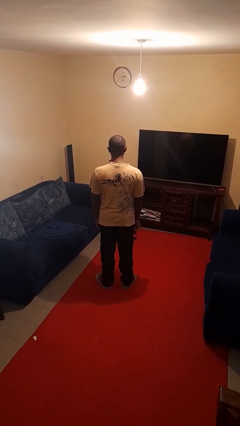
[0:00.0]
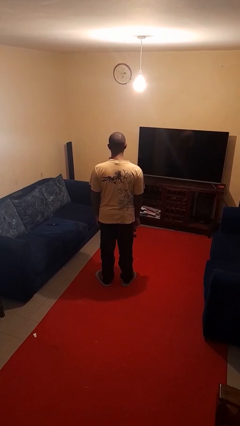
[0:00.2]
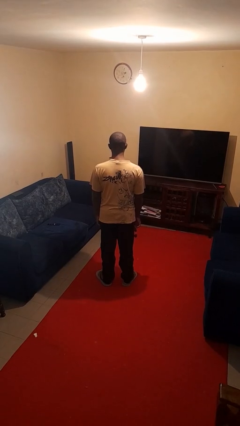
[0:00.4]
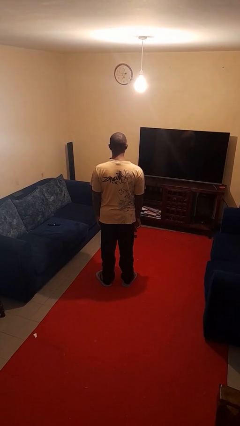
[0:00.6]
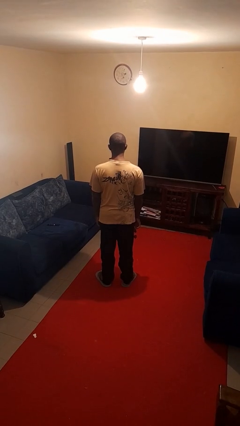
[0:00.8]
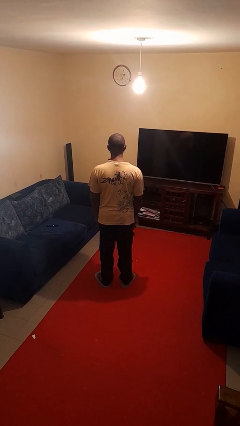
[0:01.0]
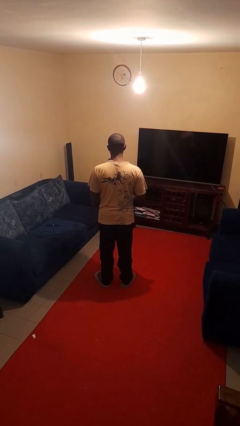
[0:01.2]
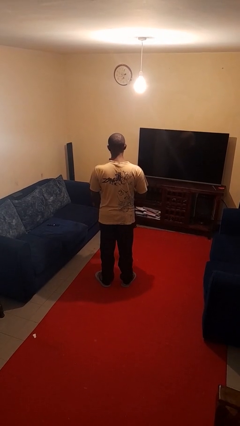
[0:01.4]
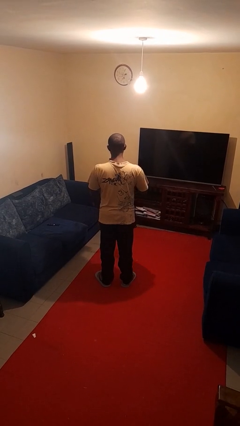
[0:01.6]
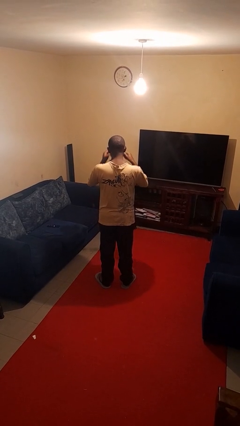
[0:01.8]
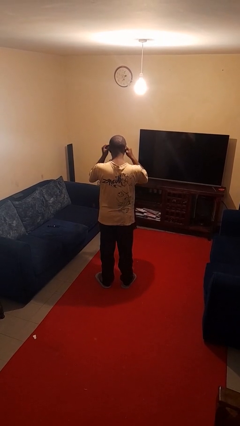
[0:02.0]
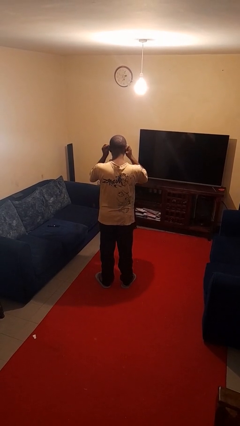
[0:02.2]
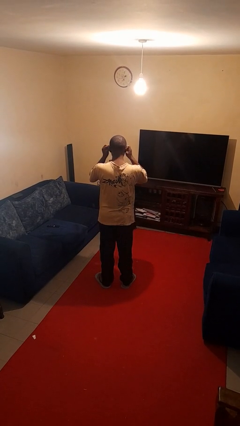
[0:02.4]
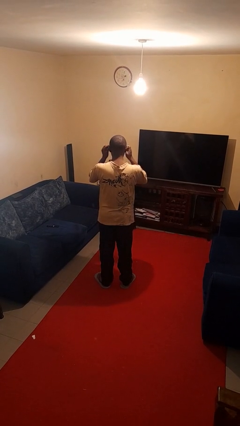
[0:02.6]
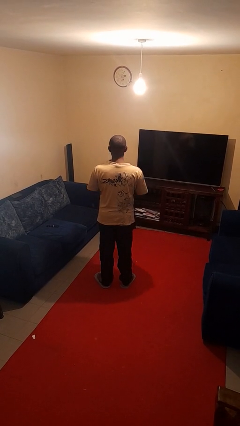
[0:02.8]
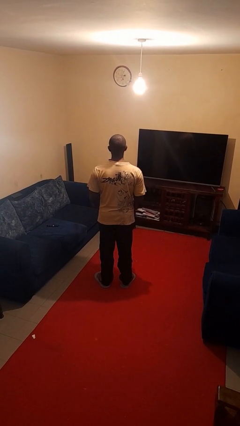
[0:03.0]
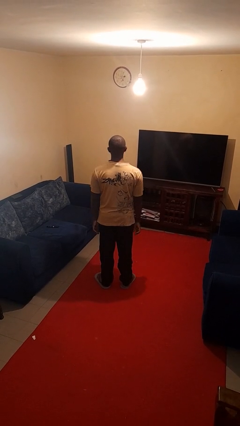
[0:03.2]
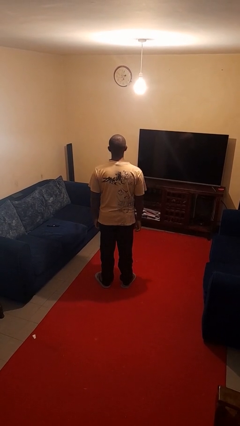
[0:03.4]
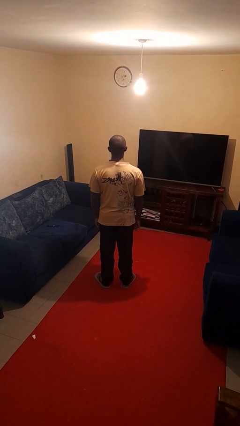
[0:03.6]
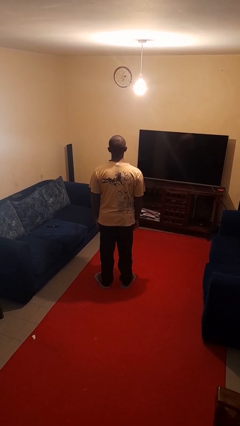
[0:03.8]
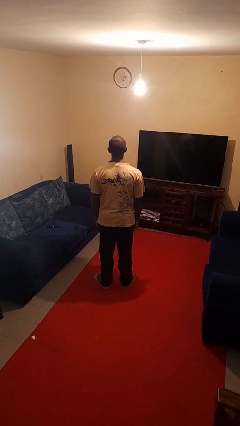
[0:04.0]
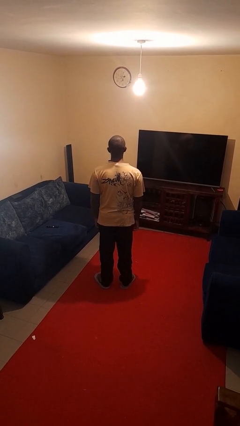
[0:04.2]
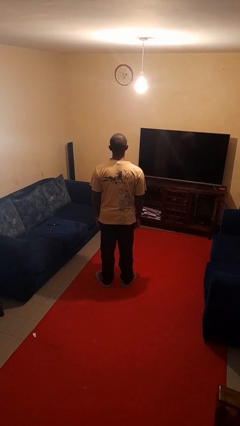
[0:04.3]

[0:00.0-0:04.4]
person puts on sunglasses

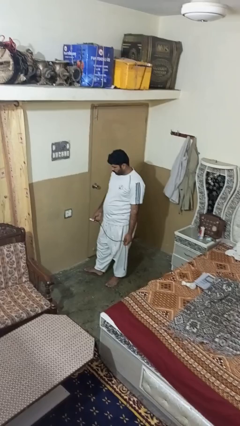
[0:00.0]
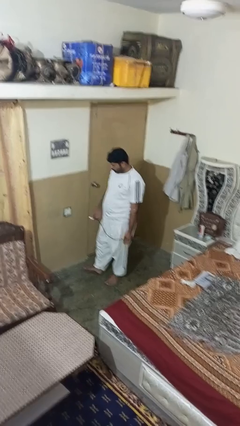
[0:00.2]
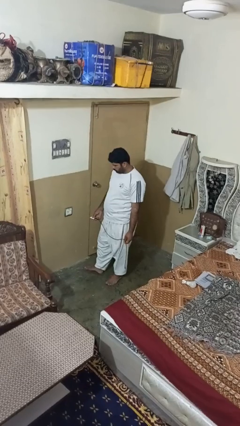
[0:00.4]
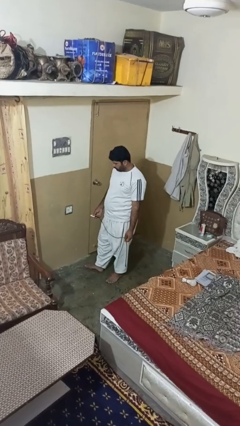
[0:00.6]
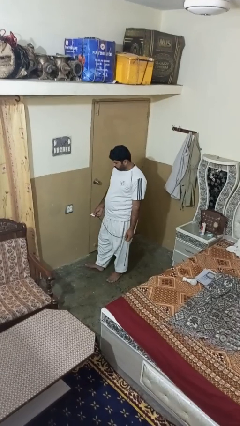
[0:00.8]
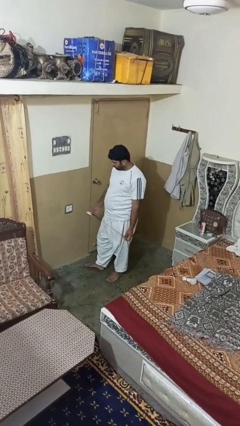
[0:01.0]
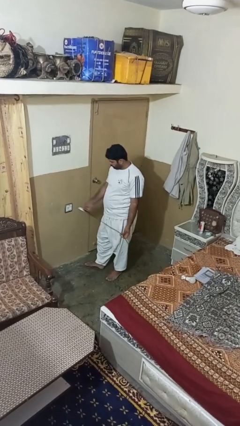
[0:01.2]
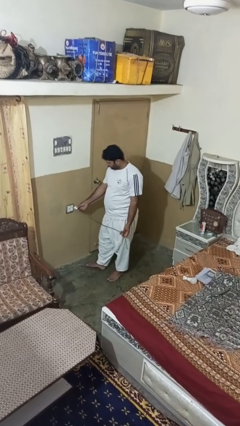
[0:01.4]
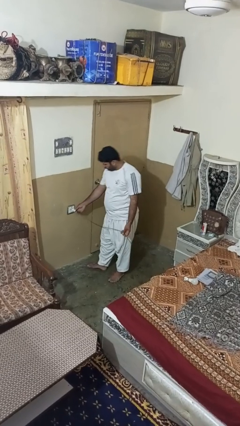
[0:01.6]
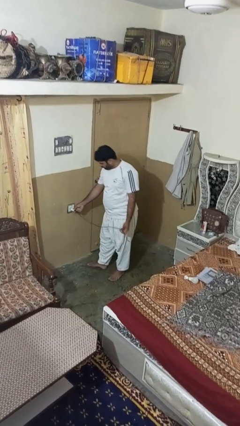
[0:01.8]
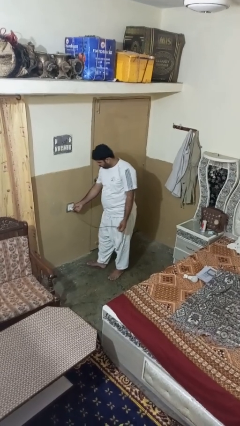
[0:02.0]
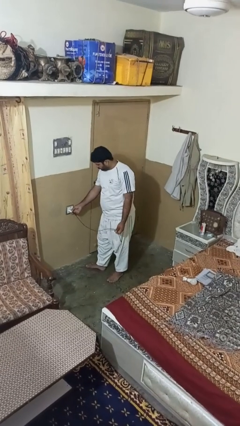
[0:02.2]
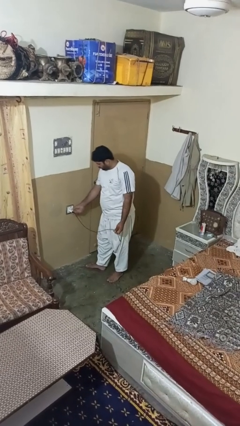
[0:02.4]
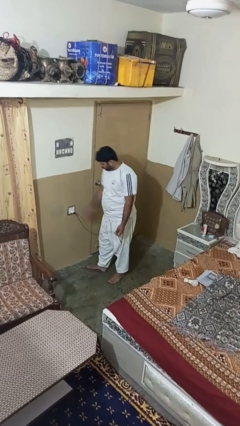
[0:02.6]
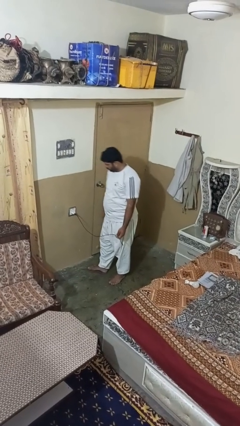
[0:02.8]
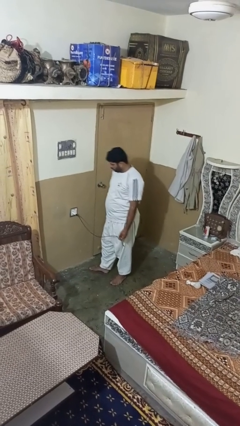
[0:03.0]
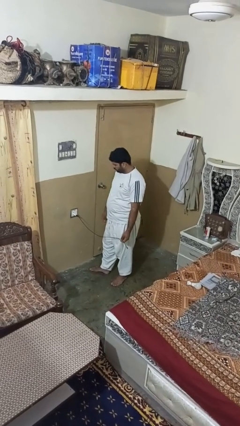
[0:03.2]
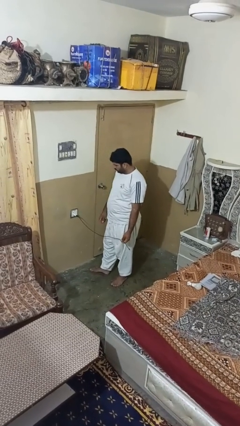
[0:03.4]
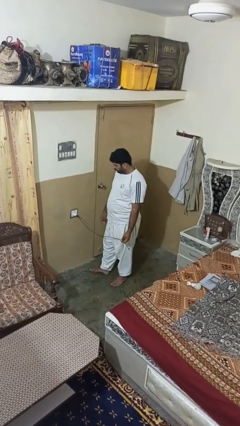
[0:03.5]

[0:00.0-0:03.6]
person plugs into electrical socket

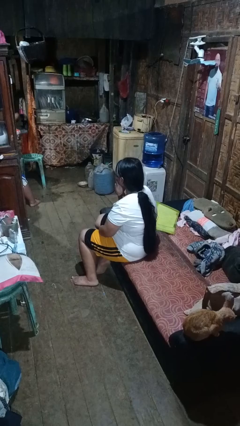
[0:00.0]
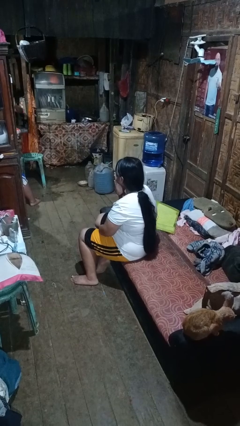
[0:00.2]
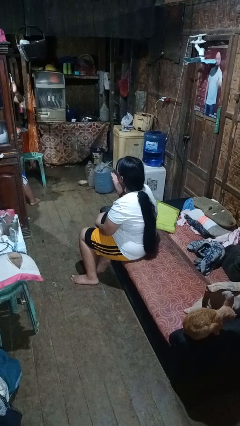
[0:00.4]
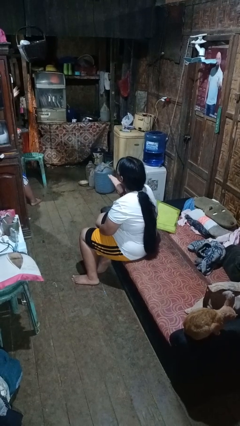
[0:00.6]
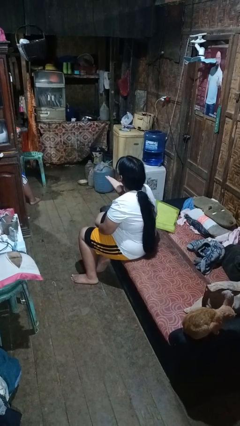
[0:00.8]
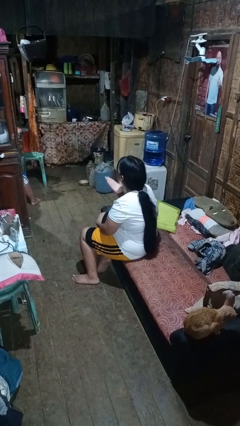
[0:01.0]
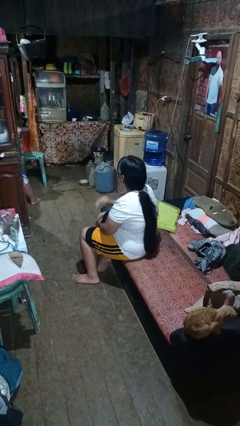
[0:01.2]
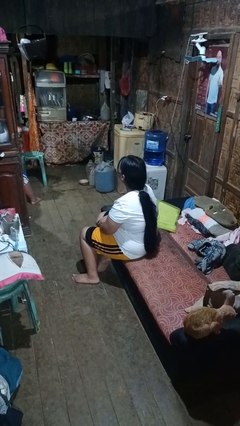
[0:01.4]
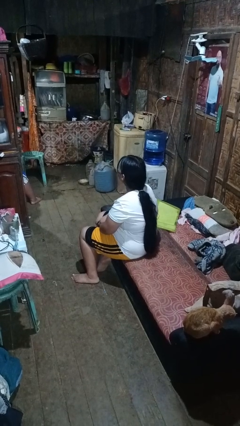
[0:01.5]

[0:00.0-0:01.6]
person gestures blow kiss

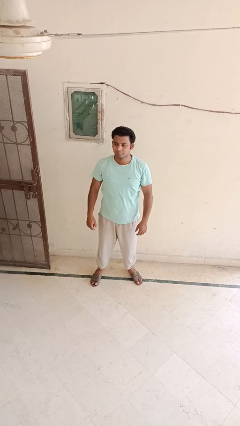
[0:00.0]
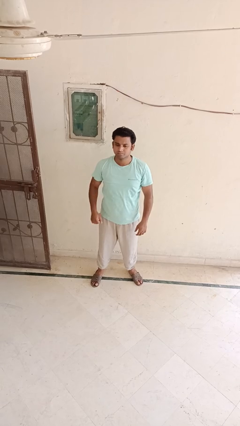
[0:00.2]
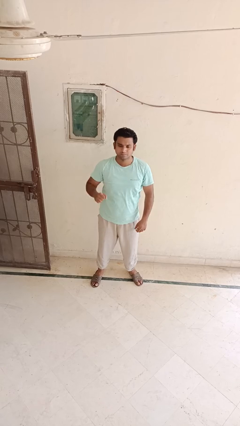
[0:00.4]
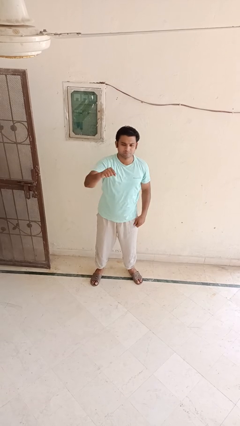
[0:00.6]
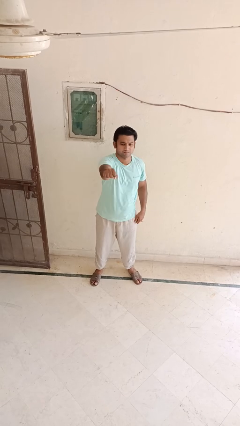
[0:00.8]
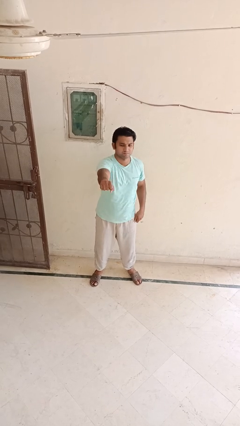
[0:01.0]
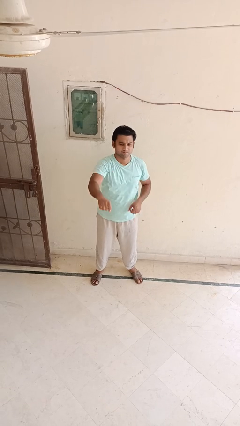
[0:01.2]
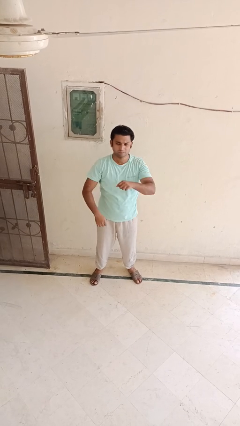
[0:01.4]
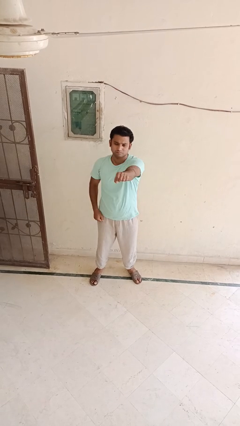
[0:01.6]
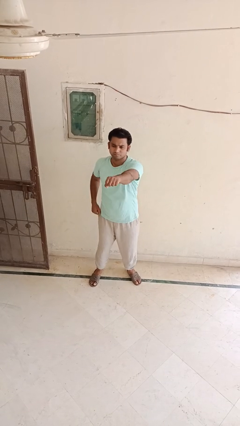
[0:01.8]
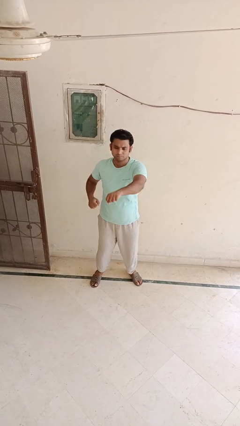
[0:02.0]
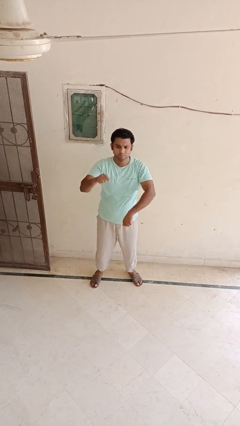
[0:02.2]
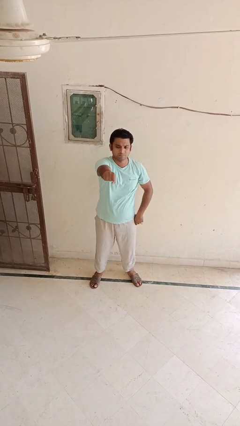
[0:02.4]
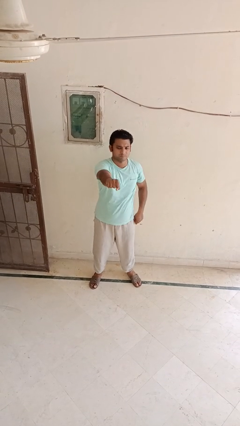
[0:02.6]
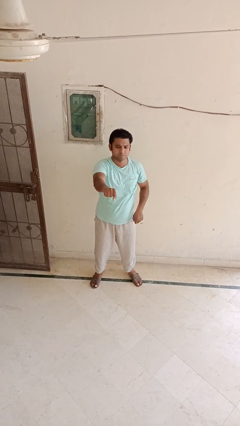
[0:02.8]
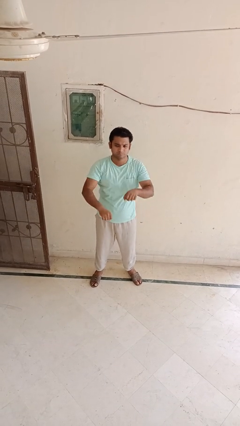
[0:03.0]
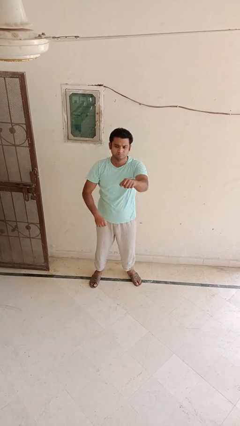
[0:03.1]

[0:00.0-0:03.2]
person punches

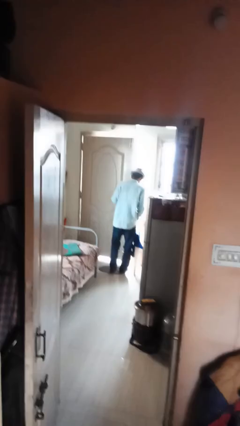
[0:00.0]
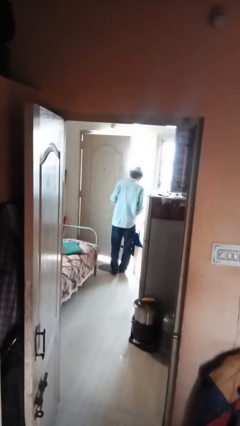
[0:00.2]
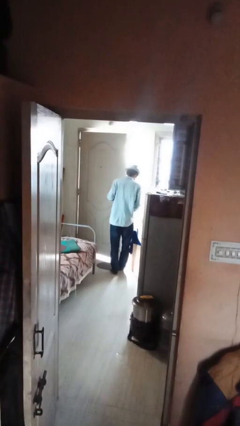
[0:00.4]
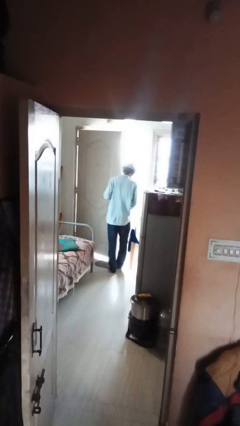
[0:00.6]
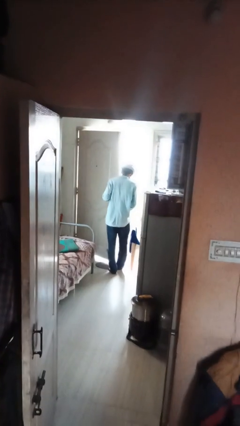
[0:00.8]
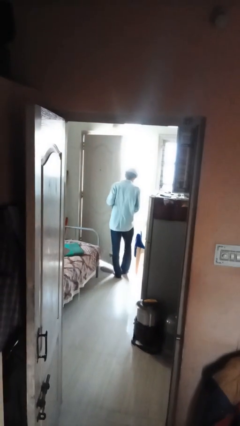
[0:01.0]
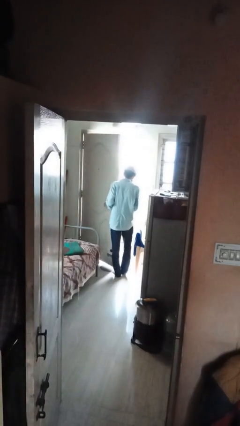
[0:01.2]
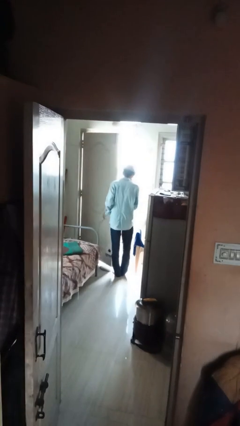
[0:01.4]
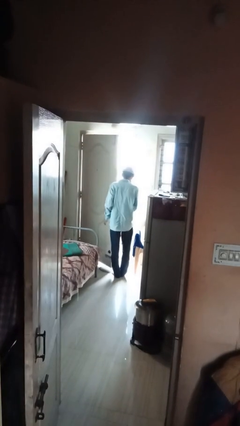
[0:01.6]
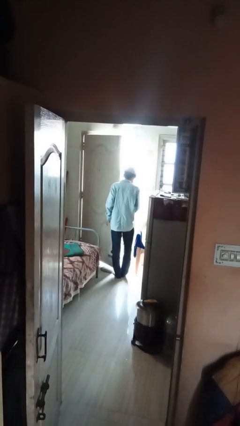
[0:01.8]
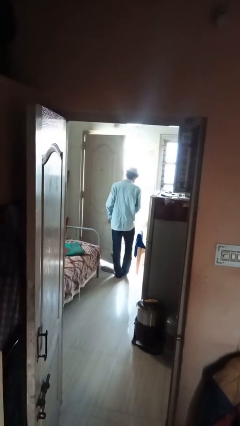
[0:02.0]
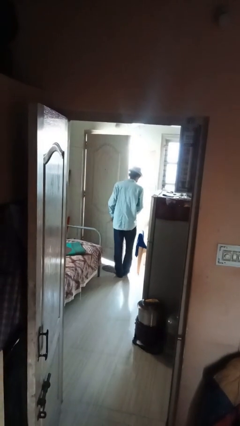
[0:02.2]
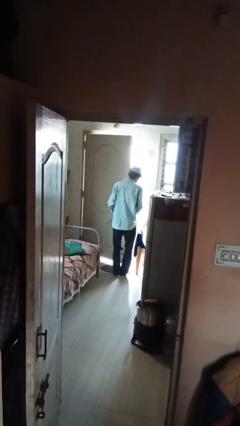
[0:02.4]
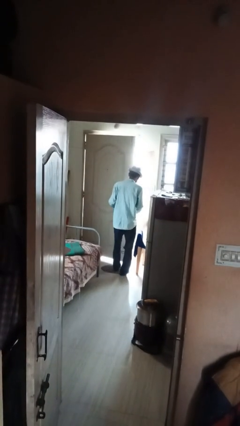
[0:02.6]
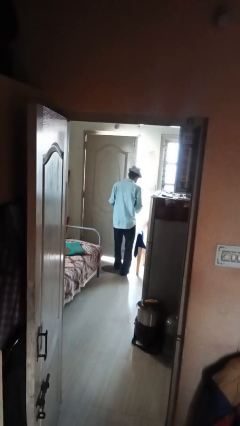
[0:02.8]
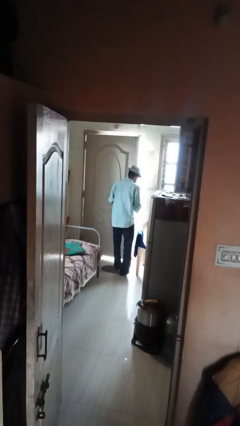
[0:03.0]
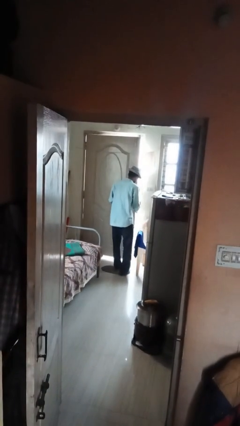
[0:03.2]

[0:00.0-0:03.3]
person opens facility door

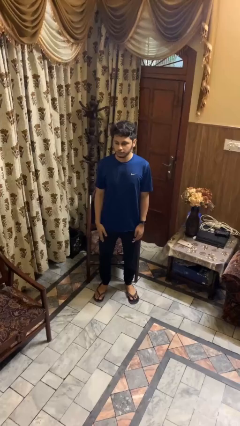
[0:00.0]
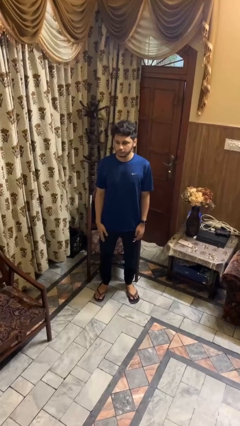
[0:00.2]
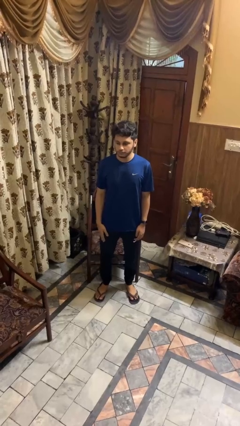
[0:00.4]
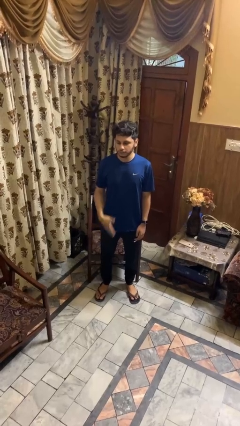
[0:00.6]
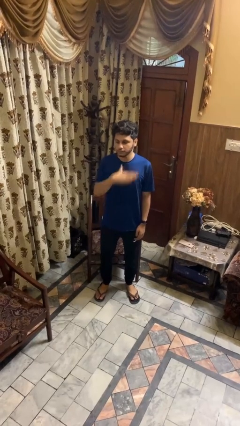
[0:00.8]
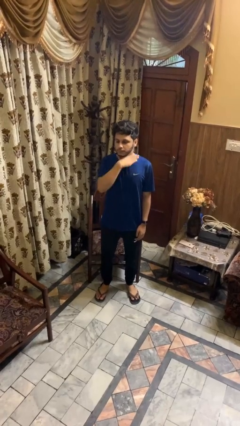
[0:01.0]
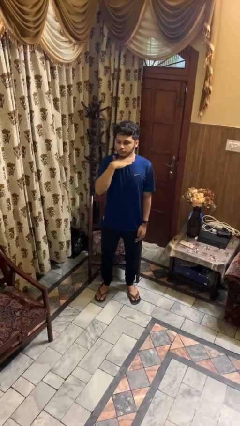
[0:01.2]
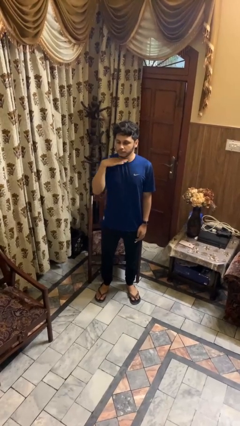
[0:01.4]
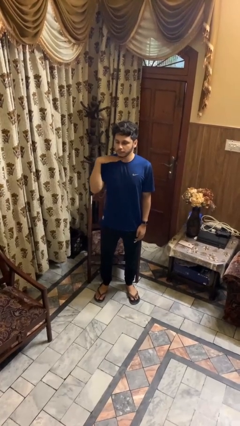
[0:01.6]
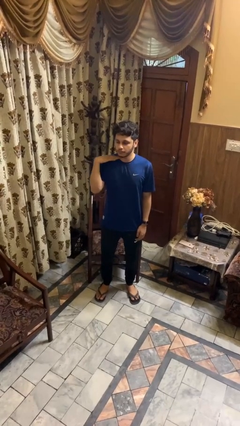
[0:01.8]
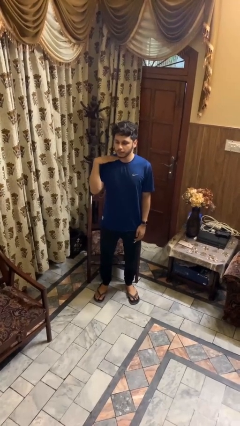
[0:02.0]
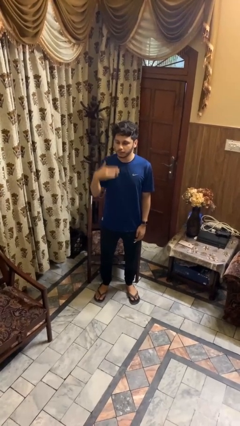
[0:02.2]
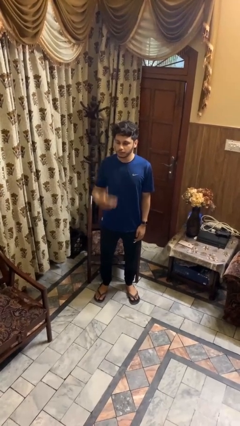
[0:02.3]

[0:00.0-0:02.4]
person gestures cut
